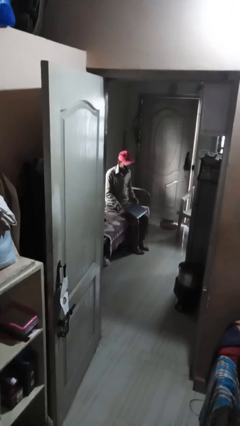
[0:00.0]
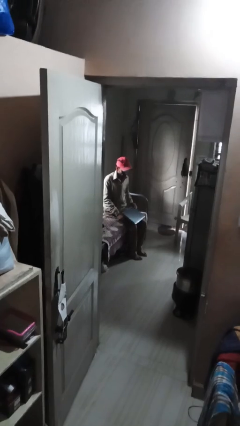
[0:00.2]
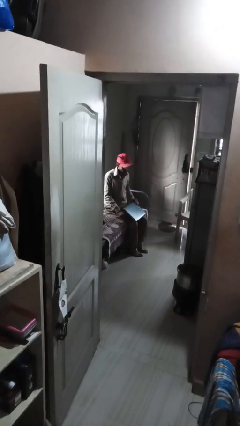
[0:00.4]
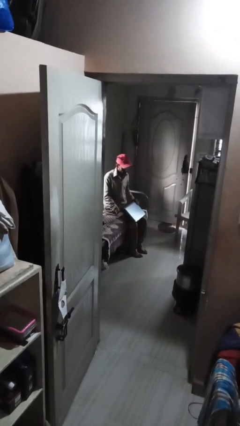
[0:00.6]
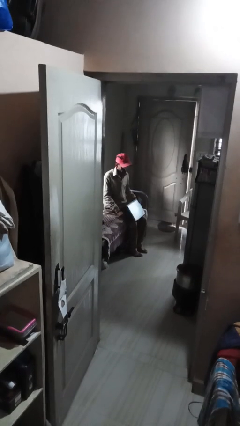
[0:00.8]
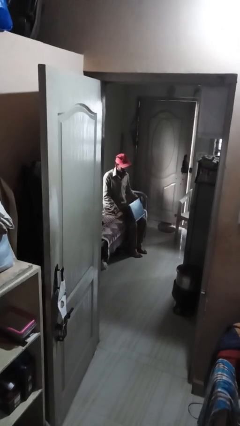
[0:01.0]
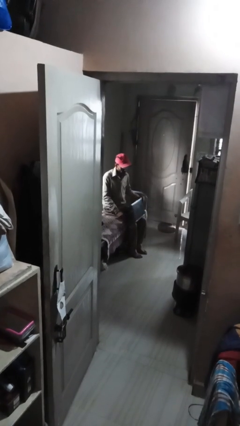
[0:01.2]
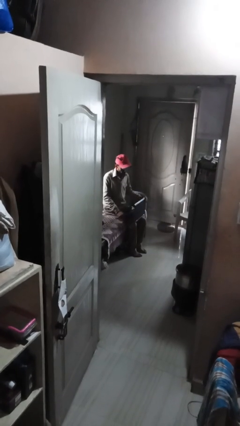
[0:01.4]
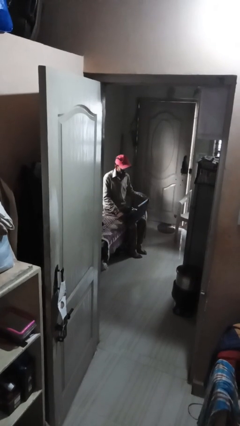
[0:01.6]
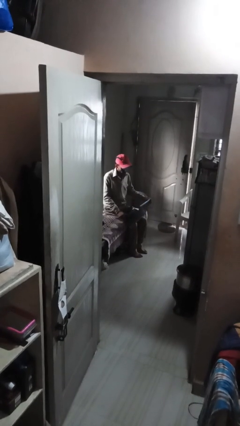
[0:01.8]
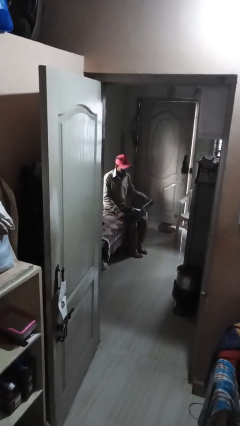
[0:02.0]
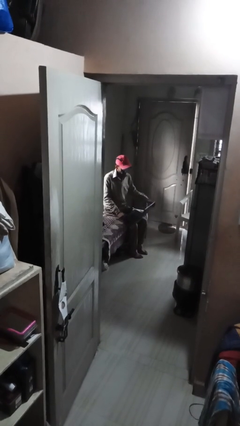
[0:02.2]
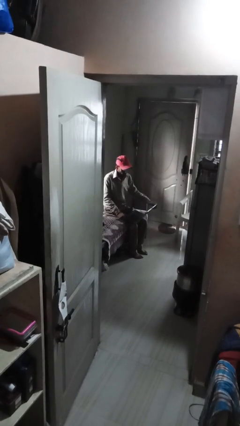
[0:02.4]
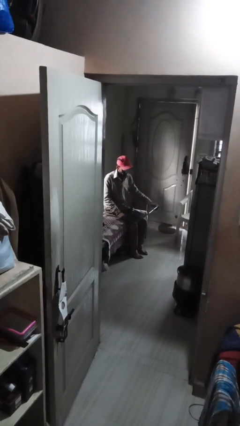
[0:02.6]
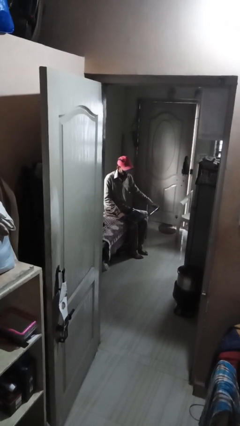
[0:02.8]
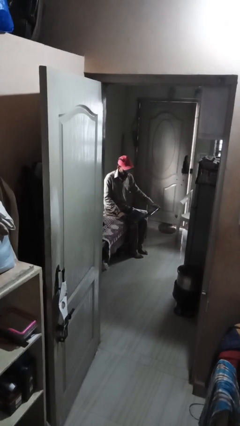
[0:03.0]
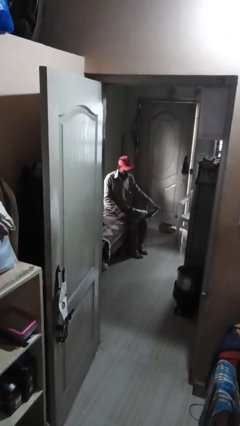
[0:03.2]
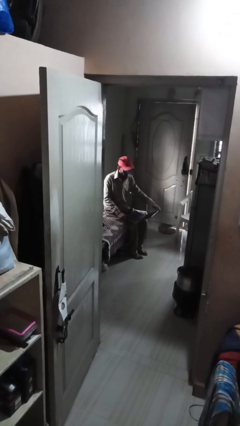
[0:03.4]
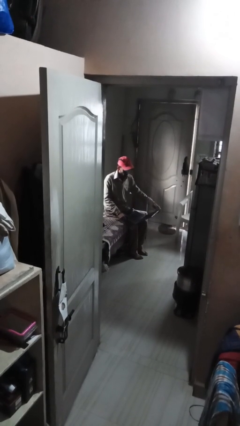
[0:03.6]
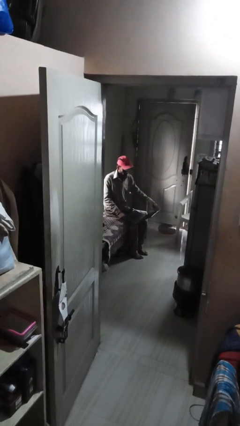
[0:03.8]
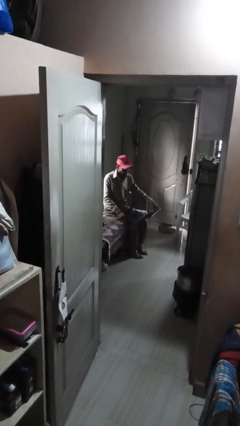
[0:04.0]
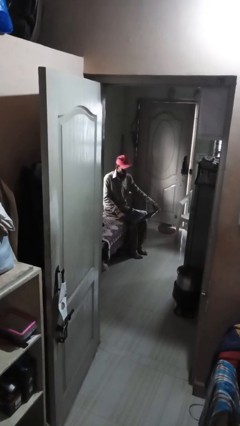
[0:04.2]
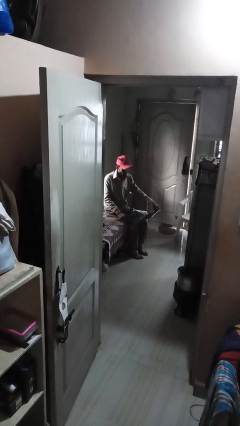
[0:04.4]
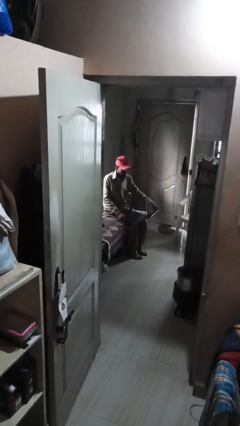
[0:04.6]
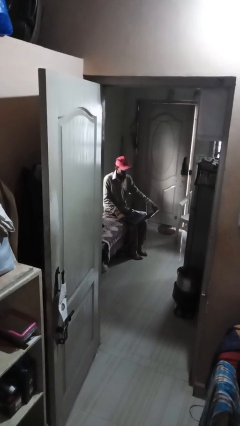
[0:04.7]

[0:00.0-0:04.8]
person opens laptop

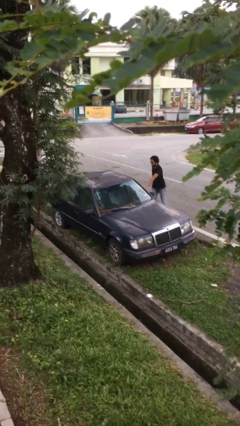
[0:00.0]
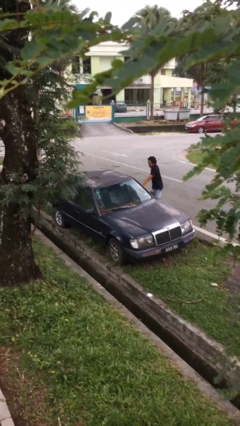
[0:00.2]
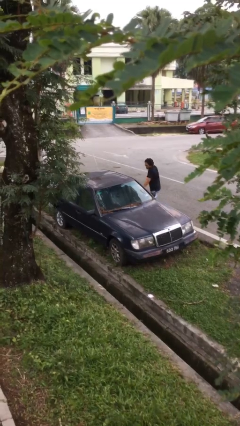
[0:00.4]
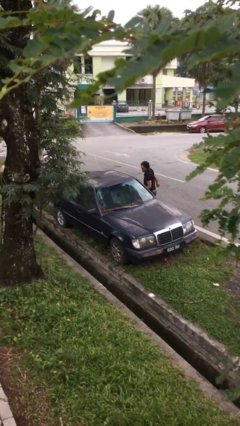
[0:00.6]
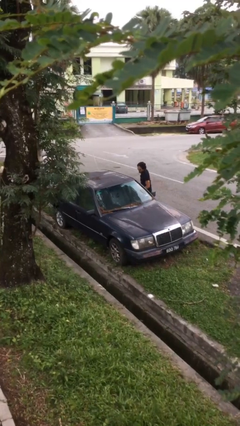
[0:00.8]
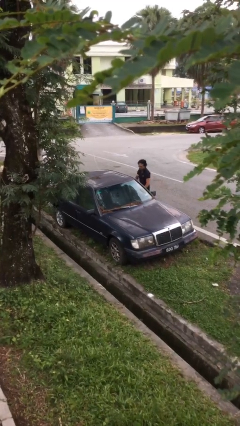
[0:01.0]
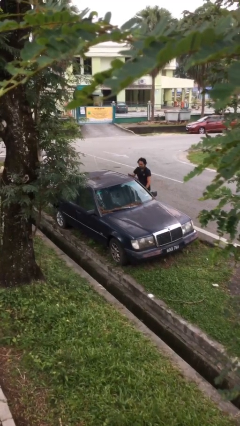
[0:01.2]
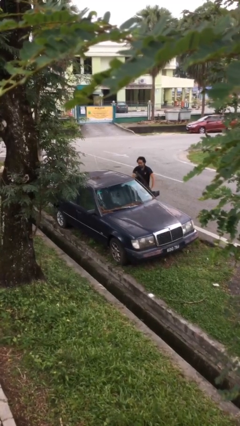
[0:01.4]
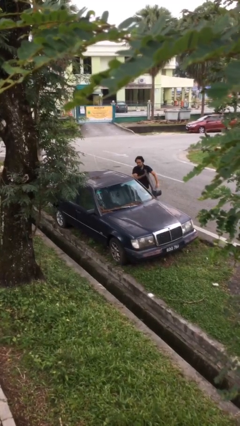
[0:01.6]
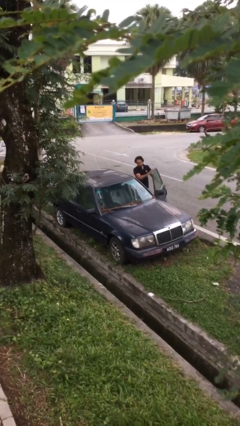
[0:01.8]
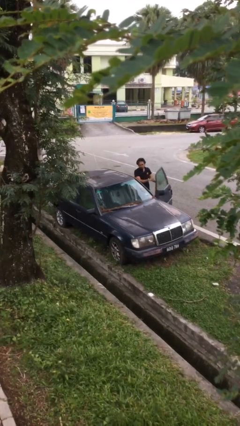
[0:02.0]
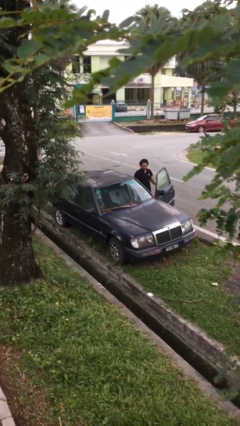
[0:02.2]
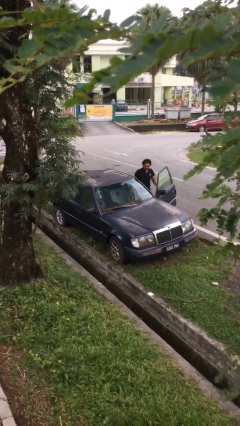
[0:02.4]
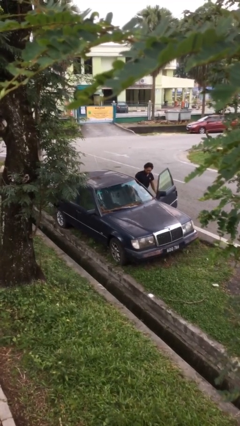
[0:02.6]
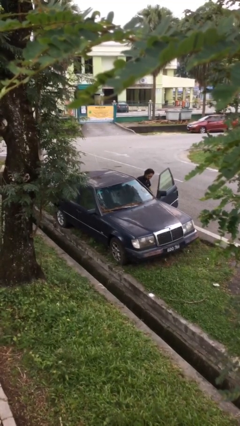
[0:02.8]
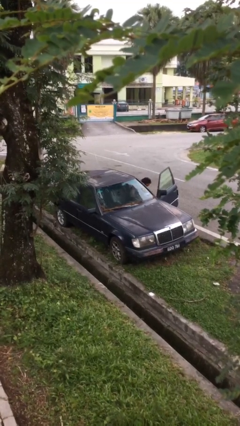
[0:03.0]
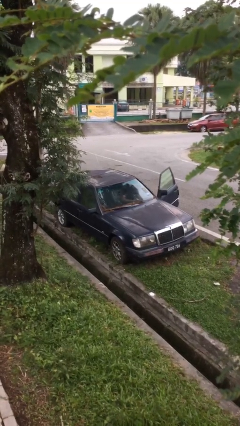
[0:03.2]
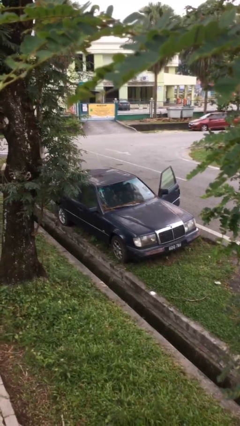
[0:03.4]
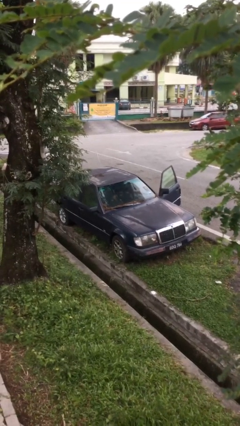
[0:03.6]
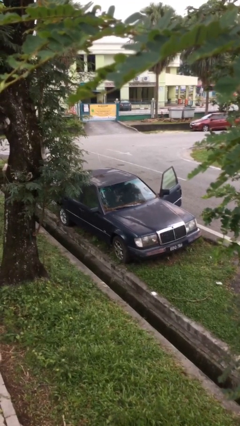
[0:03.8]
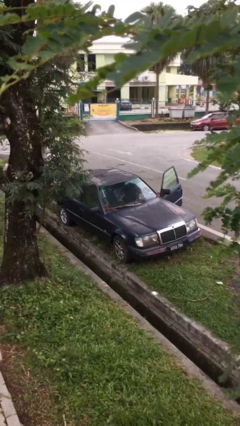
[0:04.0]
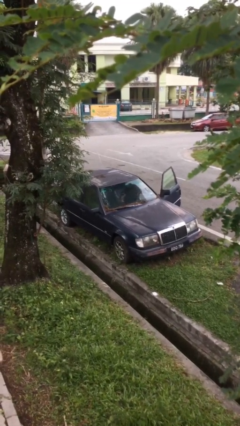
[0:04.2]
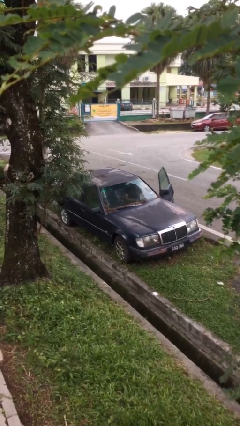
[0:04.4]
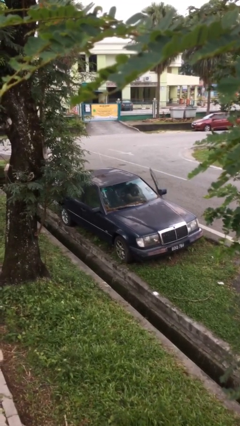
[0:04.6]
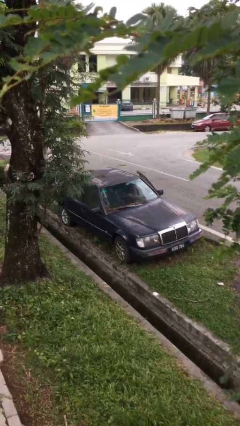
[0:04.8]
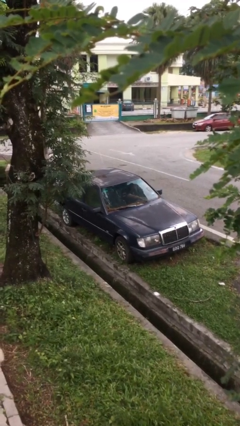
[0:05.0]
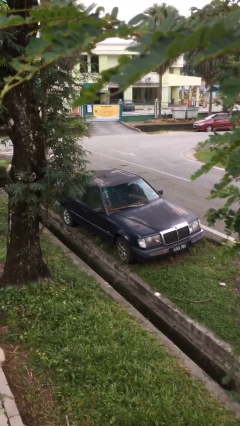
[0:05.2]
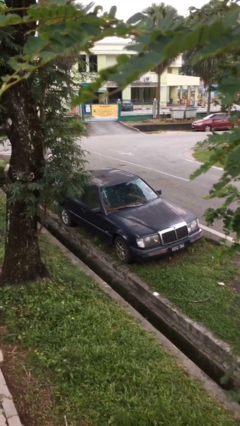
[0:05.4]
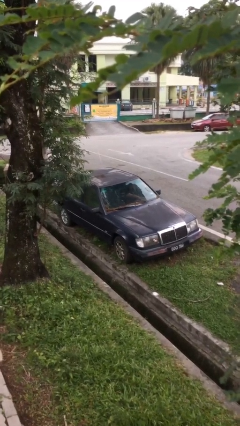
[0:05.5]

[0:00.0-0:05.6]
car picks up person

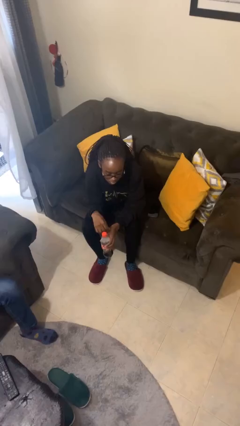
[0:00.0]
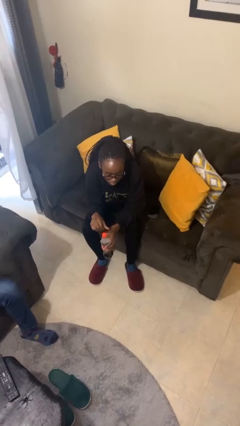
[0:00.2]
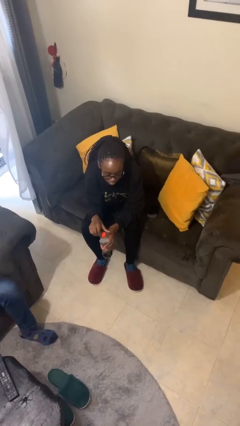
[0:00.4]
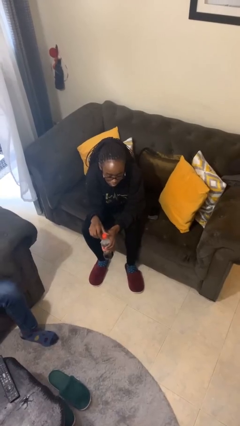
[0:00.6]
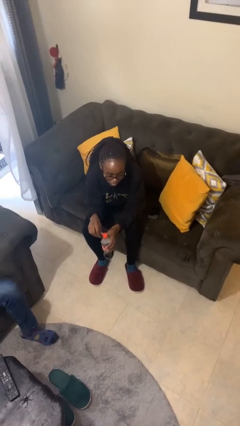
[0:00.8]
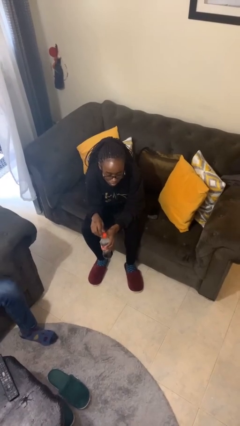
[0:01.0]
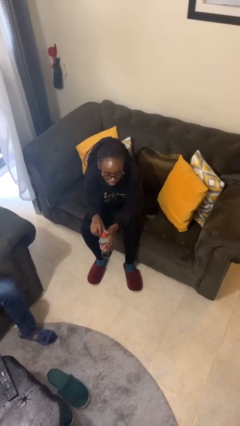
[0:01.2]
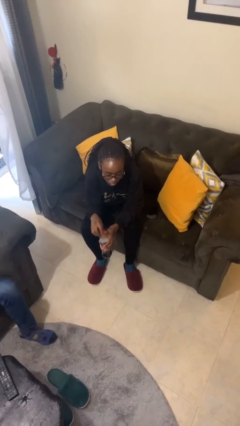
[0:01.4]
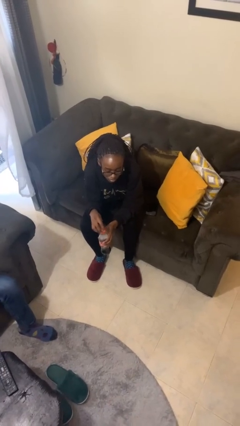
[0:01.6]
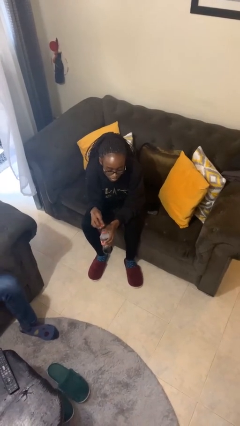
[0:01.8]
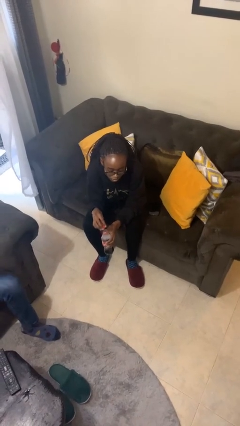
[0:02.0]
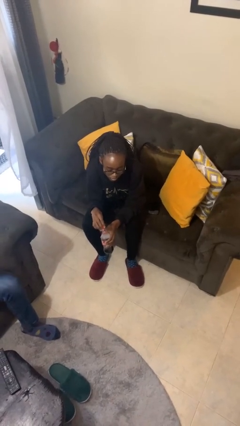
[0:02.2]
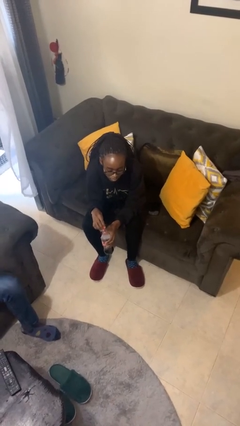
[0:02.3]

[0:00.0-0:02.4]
person unscrews lid from bottle

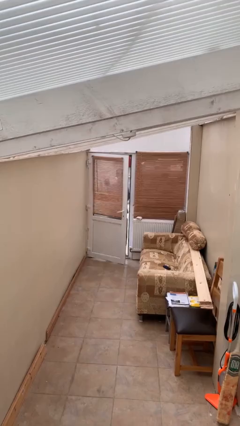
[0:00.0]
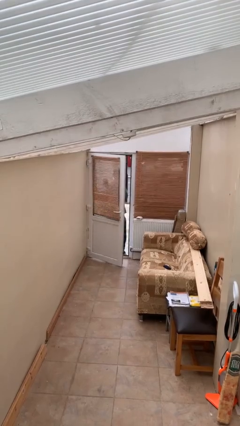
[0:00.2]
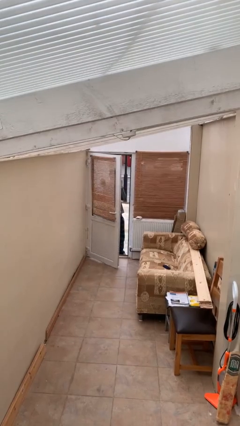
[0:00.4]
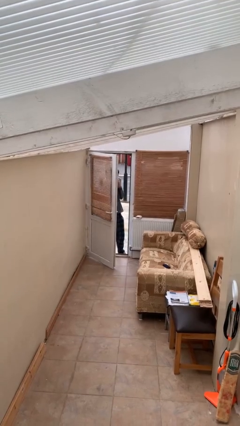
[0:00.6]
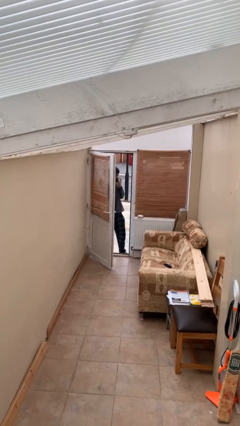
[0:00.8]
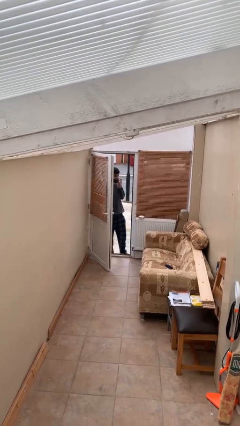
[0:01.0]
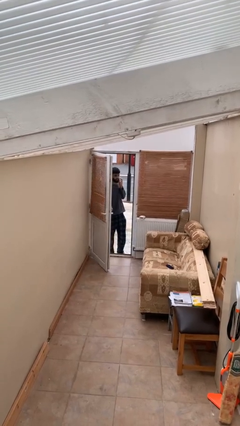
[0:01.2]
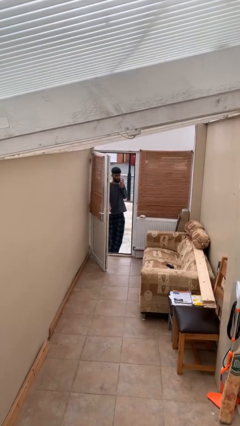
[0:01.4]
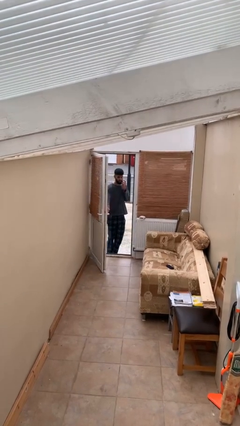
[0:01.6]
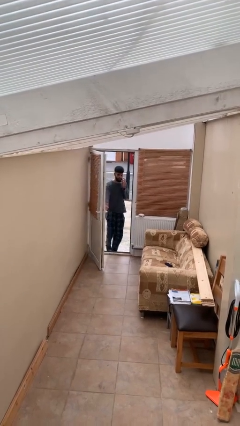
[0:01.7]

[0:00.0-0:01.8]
person opens facility door

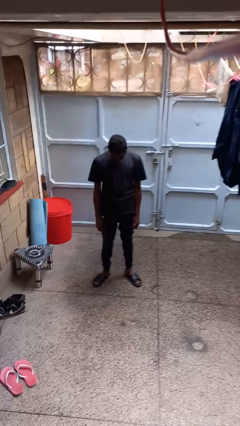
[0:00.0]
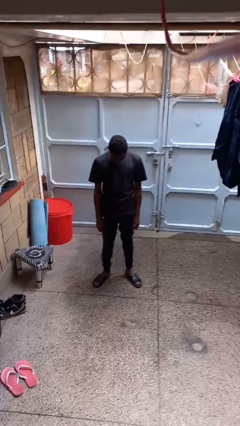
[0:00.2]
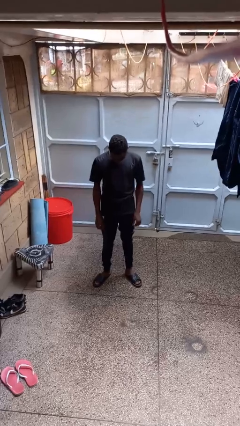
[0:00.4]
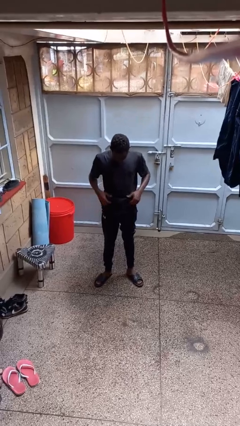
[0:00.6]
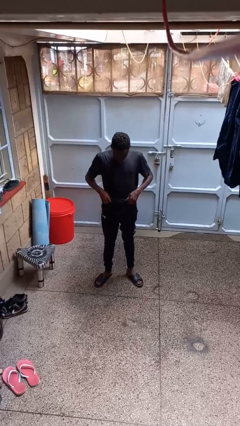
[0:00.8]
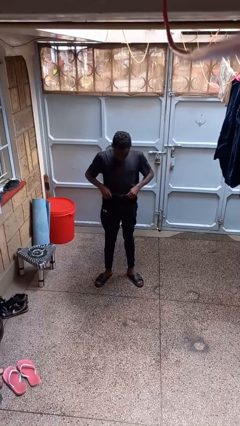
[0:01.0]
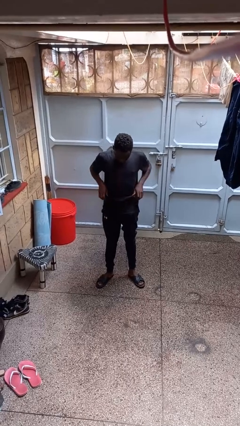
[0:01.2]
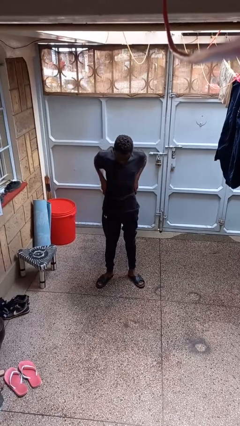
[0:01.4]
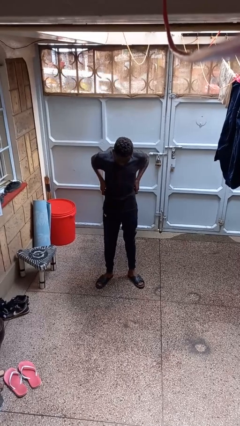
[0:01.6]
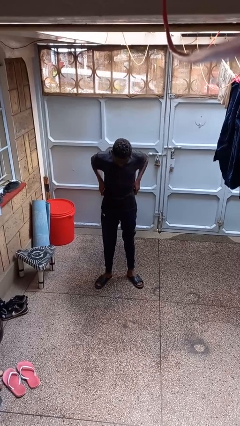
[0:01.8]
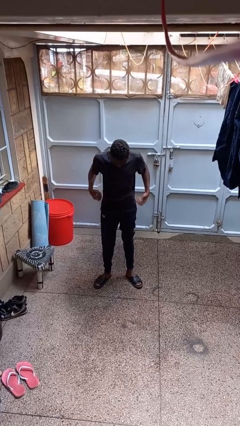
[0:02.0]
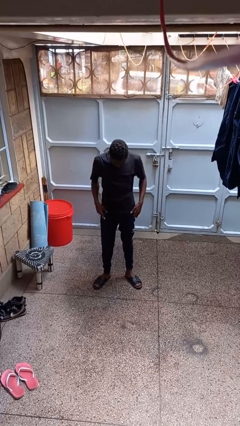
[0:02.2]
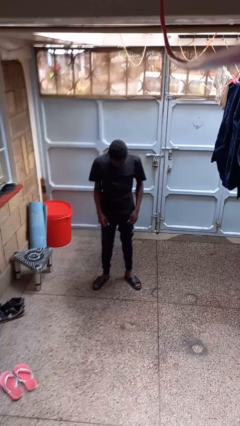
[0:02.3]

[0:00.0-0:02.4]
person hikes up pants

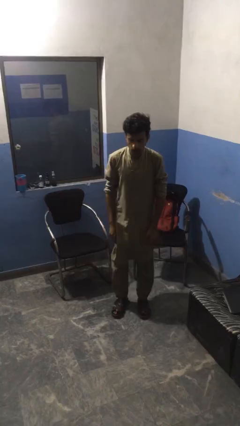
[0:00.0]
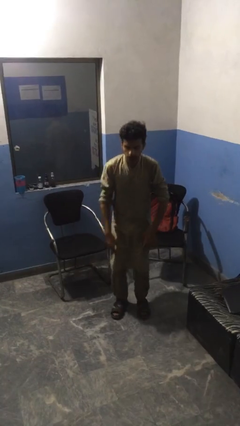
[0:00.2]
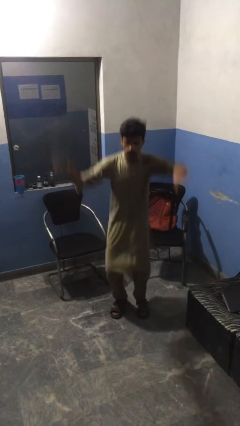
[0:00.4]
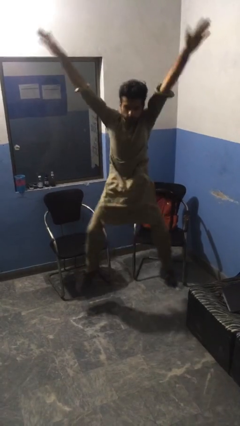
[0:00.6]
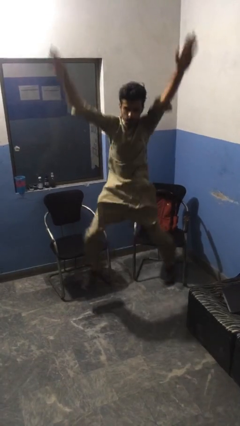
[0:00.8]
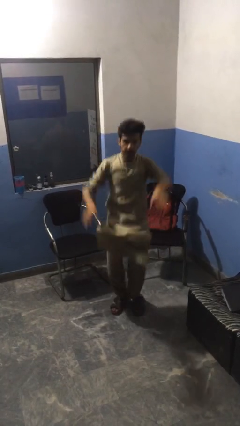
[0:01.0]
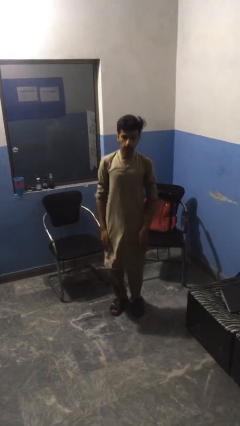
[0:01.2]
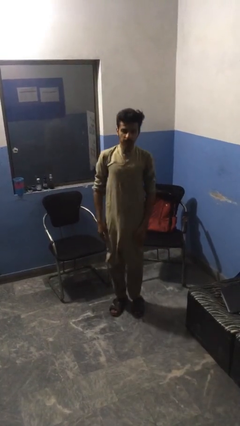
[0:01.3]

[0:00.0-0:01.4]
person exercises with jumping jacks
